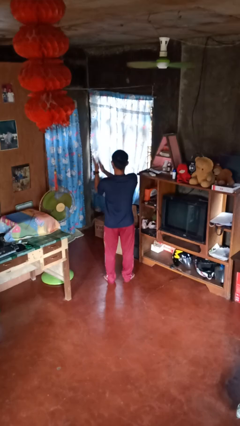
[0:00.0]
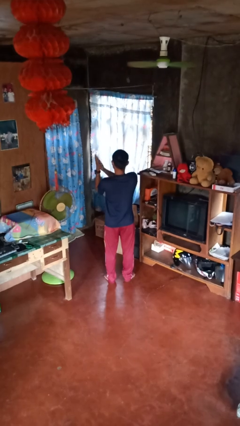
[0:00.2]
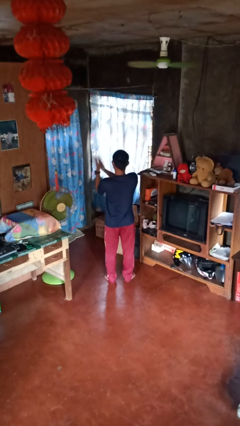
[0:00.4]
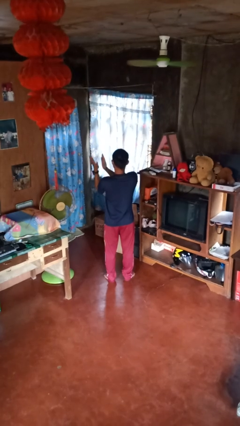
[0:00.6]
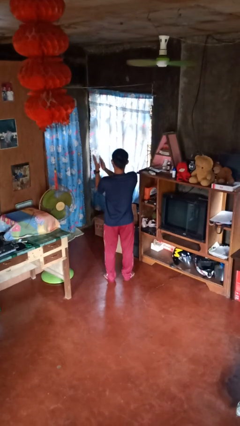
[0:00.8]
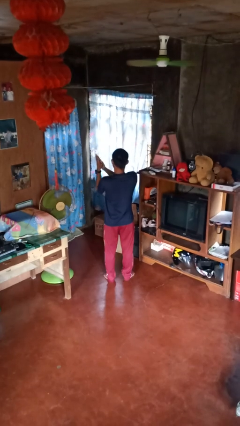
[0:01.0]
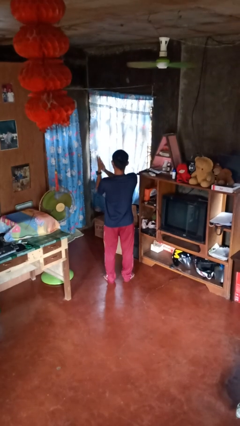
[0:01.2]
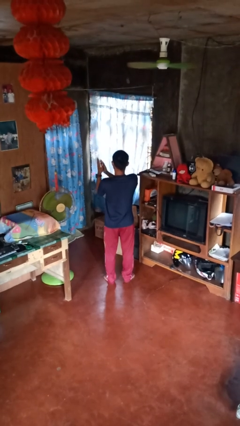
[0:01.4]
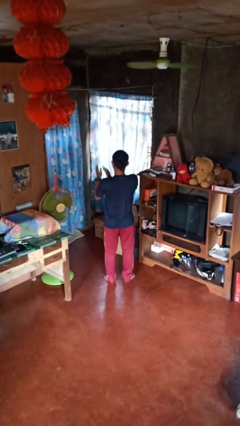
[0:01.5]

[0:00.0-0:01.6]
person claps hands

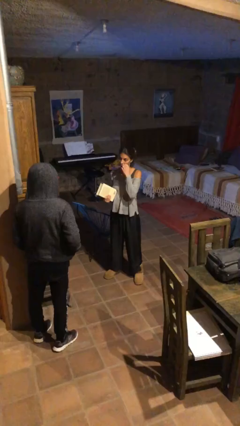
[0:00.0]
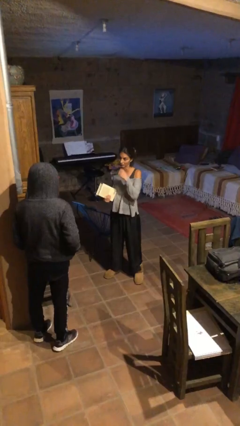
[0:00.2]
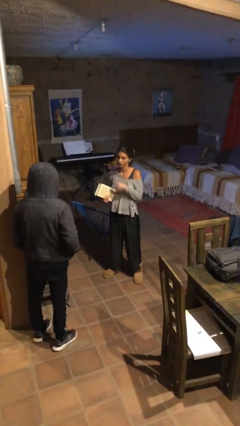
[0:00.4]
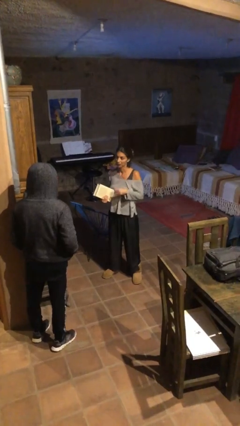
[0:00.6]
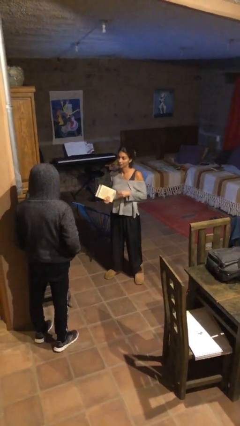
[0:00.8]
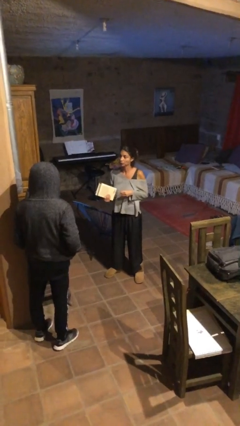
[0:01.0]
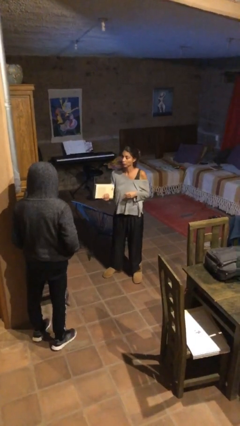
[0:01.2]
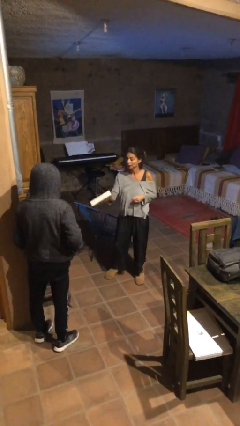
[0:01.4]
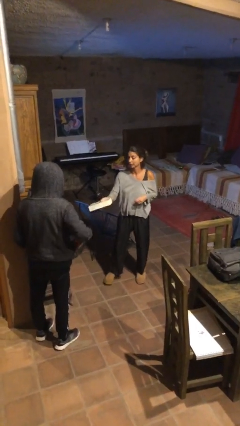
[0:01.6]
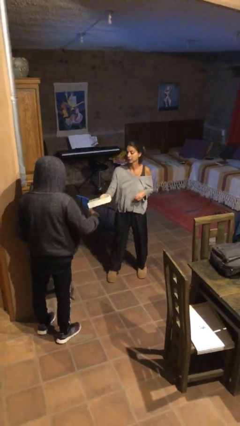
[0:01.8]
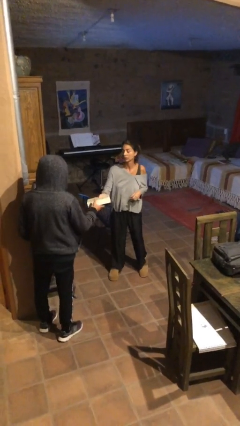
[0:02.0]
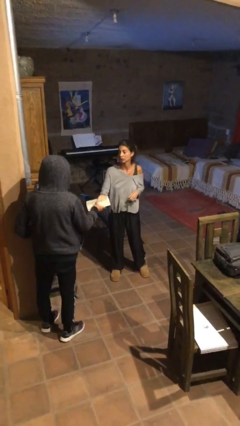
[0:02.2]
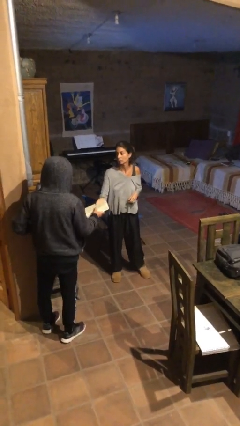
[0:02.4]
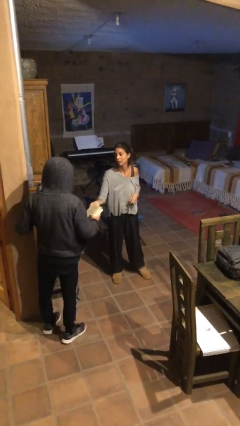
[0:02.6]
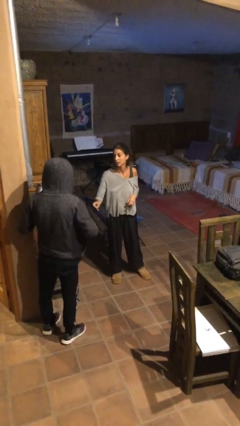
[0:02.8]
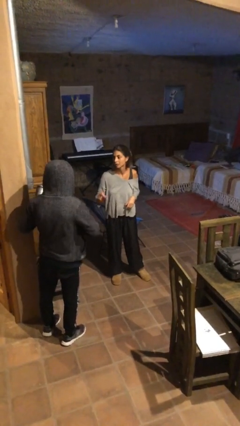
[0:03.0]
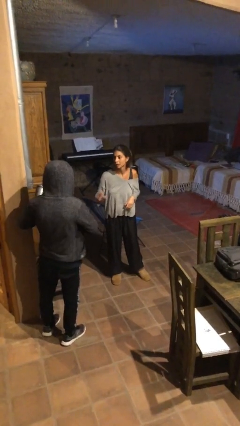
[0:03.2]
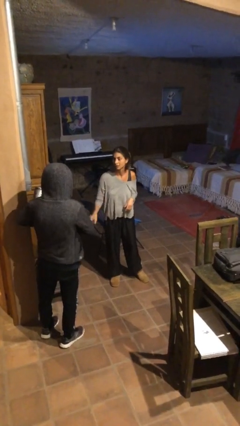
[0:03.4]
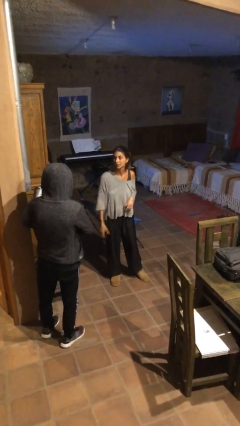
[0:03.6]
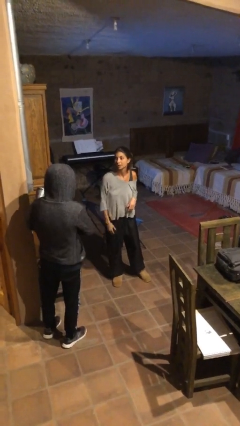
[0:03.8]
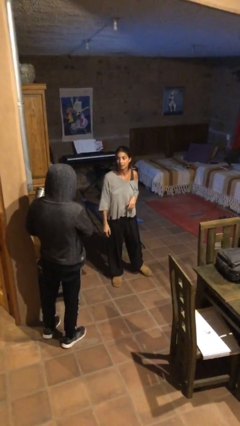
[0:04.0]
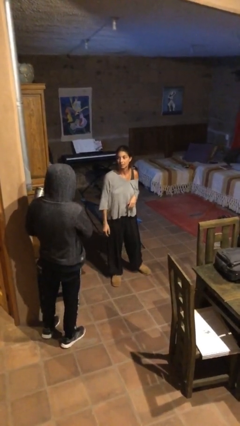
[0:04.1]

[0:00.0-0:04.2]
person transfers object to person

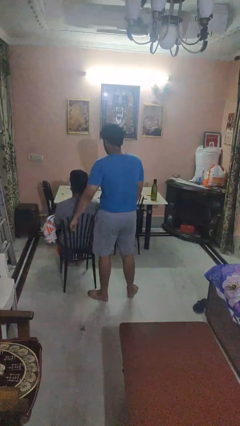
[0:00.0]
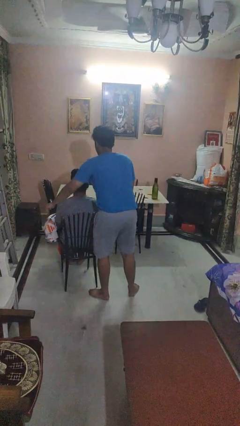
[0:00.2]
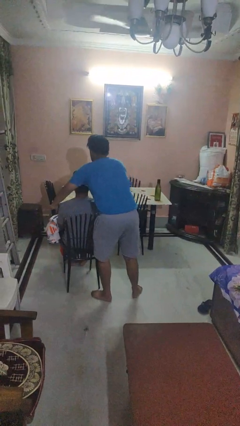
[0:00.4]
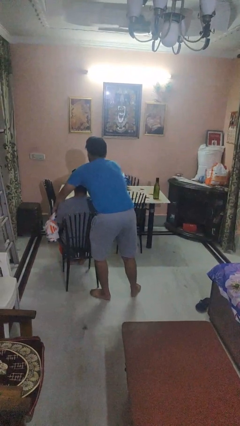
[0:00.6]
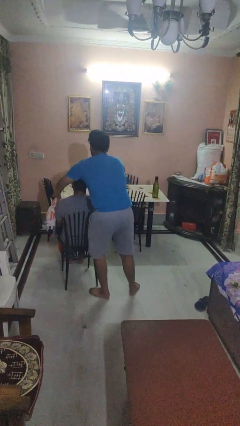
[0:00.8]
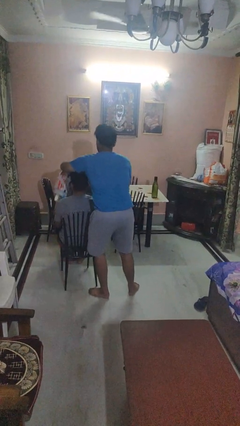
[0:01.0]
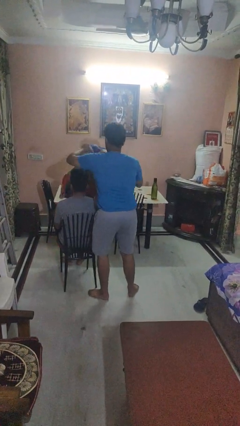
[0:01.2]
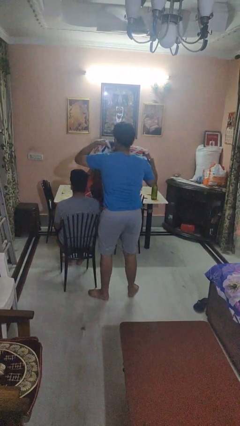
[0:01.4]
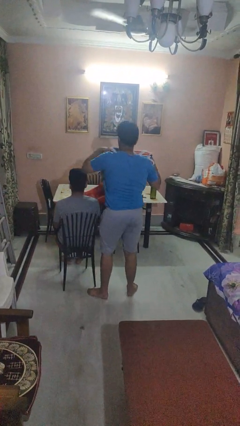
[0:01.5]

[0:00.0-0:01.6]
person uncovers friend with blanket

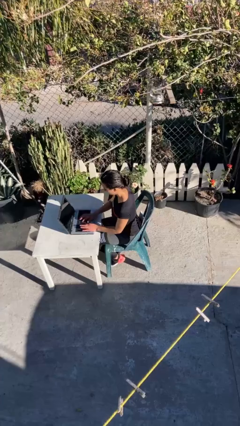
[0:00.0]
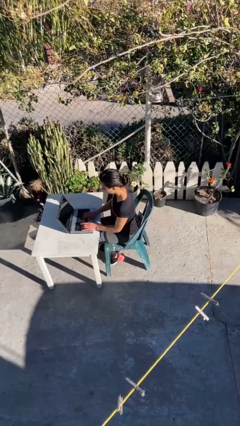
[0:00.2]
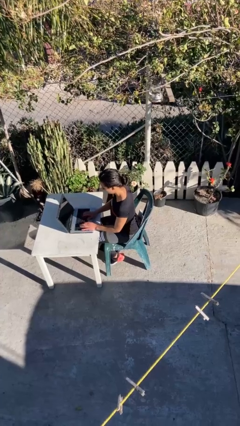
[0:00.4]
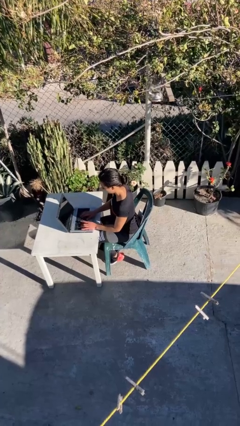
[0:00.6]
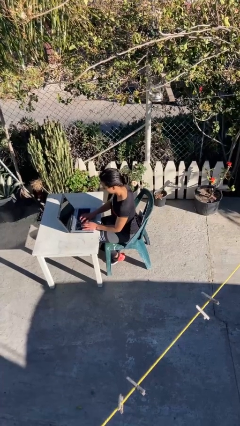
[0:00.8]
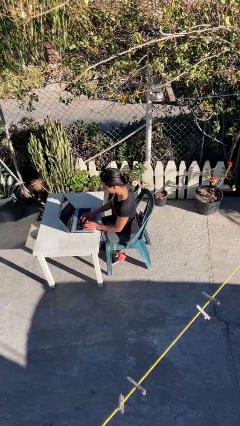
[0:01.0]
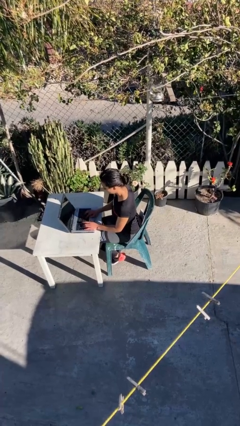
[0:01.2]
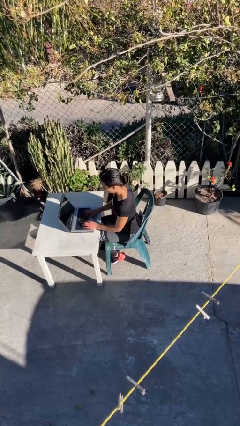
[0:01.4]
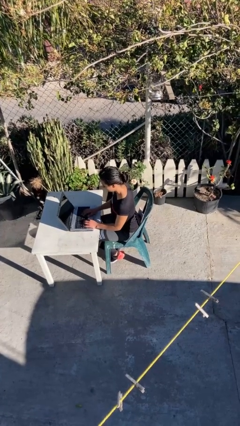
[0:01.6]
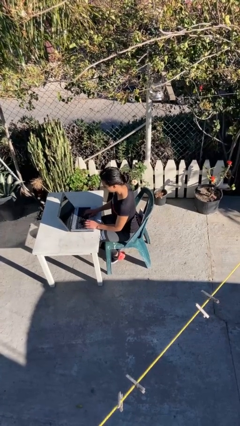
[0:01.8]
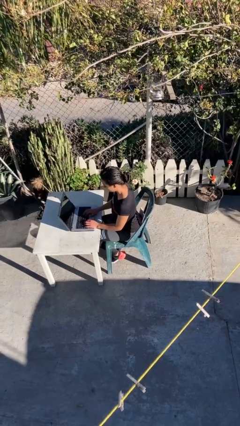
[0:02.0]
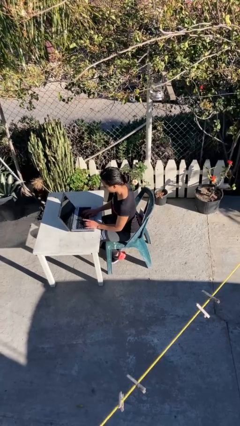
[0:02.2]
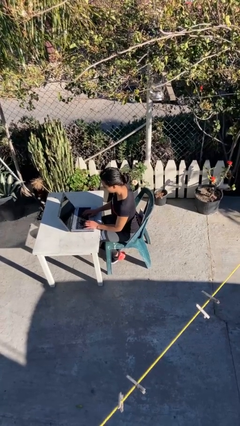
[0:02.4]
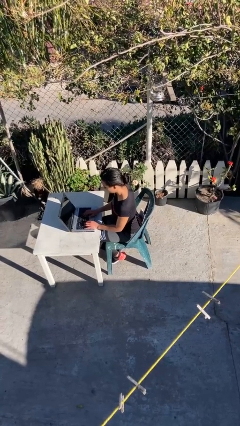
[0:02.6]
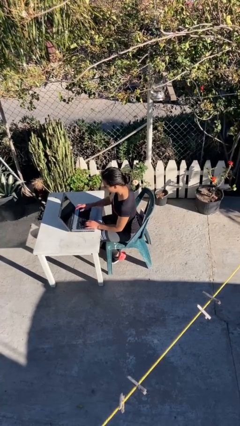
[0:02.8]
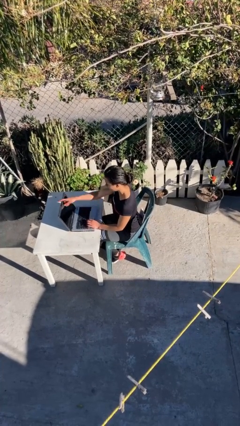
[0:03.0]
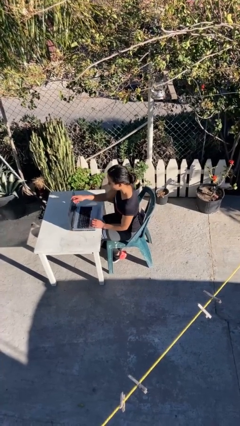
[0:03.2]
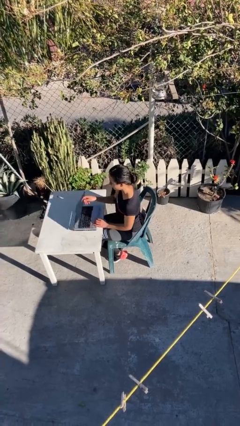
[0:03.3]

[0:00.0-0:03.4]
person interacts with laptop

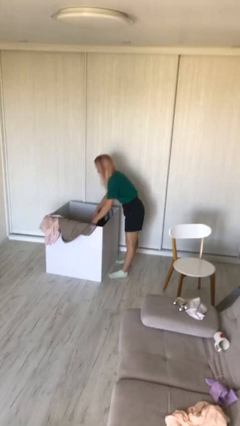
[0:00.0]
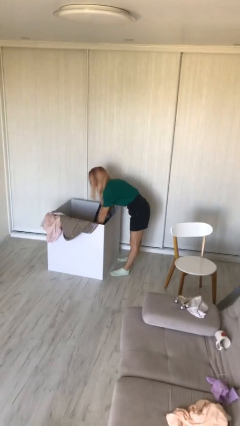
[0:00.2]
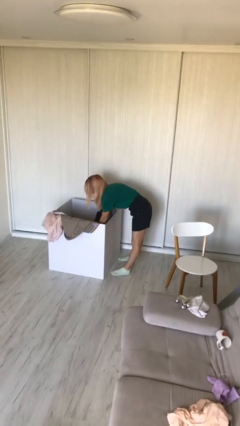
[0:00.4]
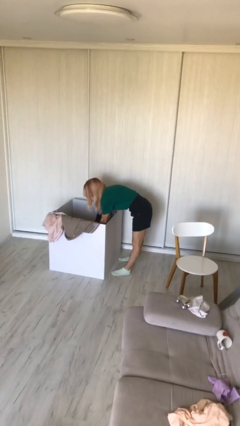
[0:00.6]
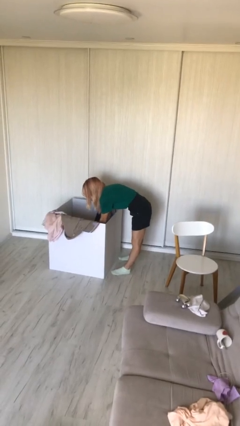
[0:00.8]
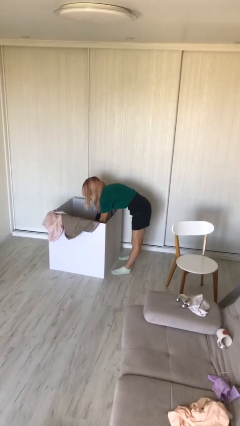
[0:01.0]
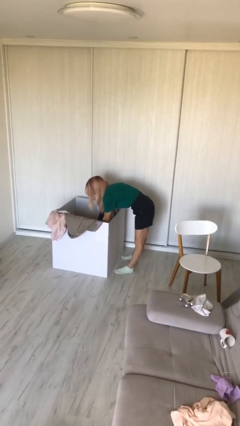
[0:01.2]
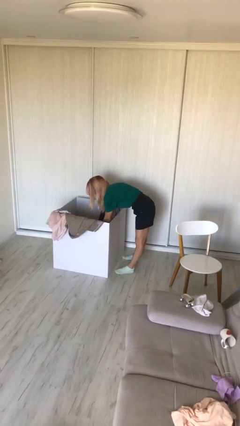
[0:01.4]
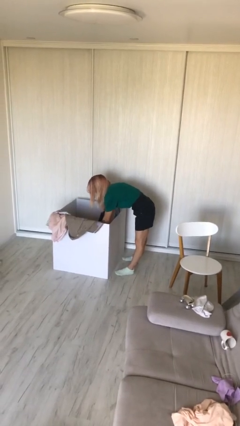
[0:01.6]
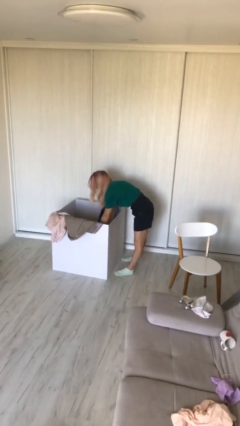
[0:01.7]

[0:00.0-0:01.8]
person searches in box

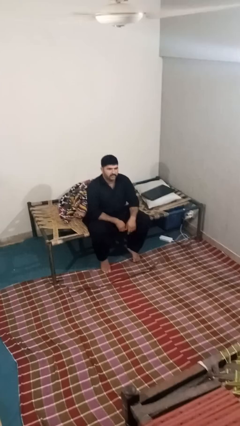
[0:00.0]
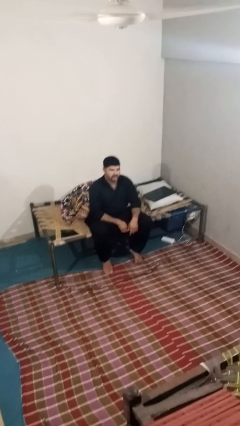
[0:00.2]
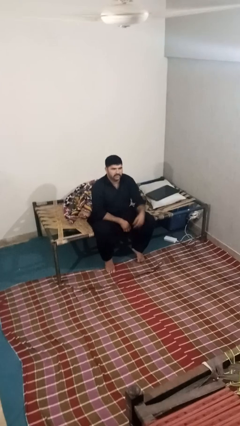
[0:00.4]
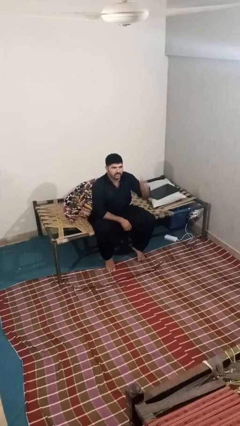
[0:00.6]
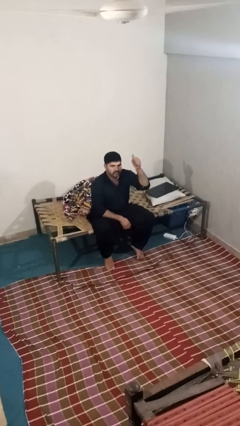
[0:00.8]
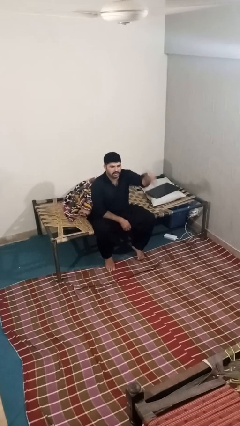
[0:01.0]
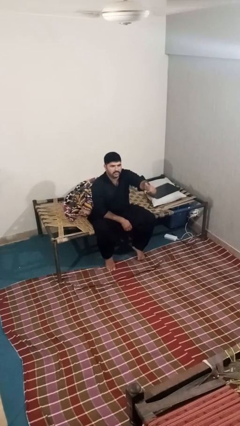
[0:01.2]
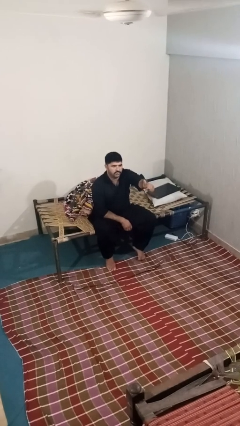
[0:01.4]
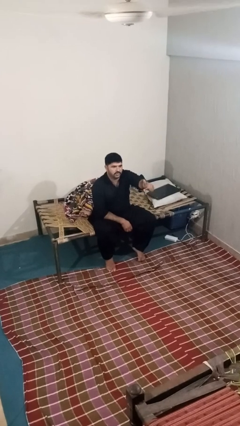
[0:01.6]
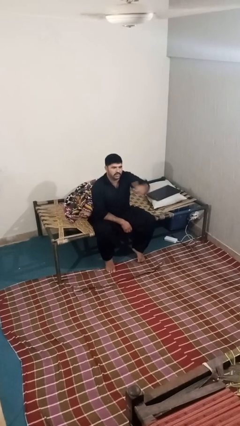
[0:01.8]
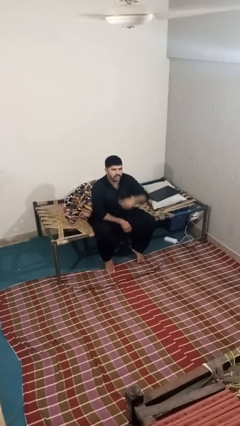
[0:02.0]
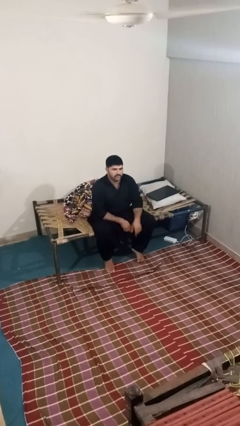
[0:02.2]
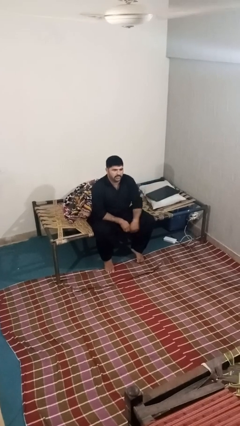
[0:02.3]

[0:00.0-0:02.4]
person gestures thumbs up

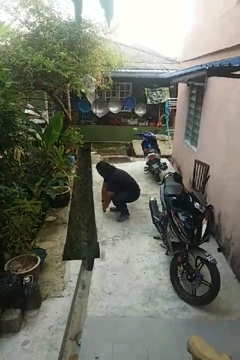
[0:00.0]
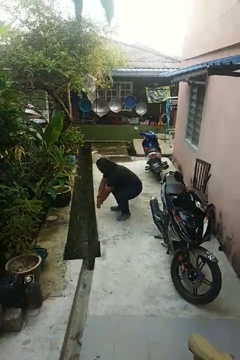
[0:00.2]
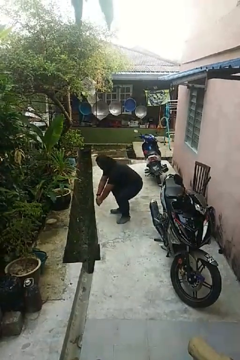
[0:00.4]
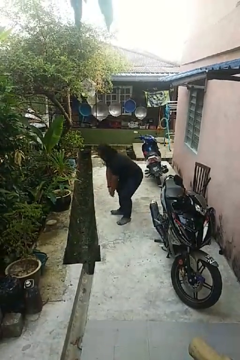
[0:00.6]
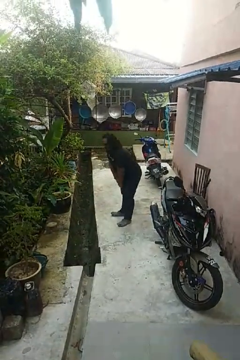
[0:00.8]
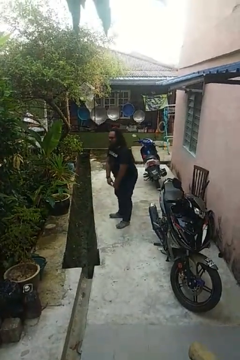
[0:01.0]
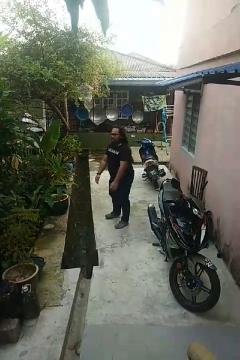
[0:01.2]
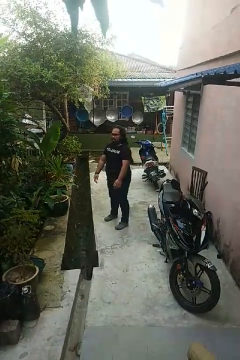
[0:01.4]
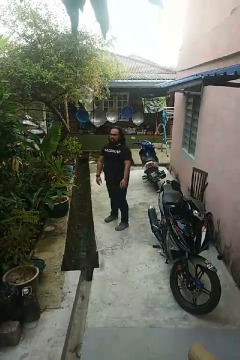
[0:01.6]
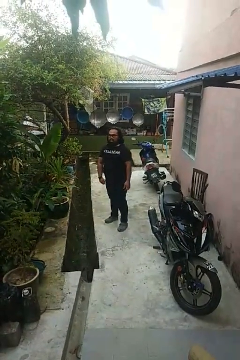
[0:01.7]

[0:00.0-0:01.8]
person stands up

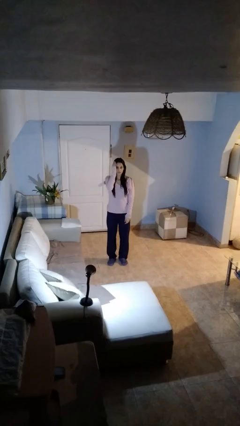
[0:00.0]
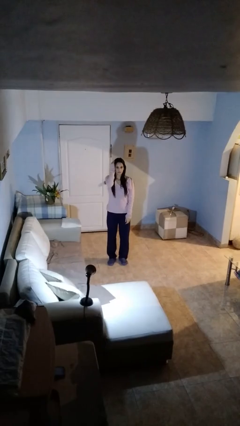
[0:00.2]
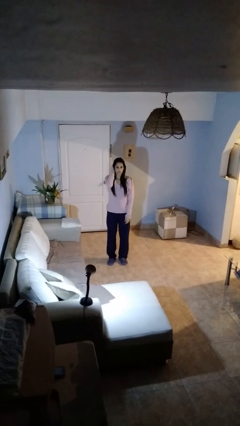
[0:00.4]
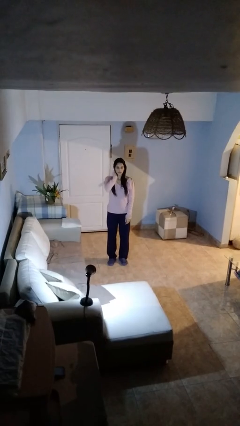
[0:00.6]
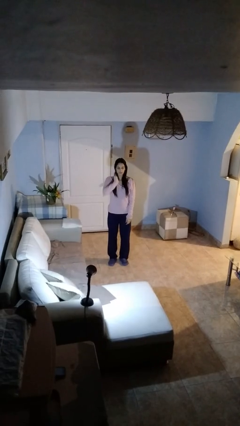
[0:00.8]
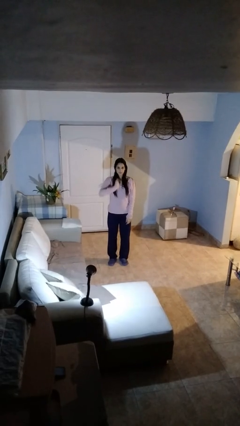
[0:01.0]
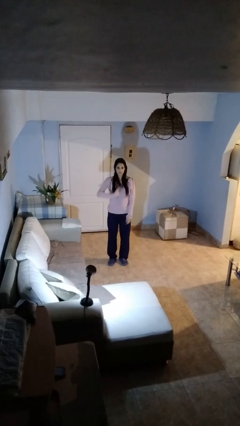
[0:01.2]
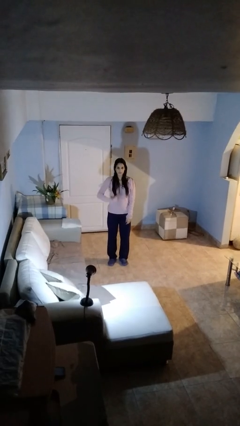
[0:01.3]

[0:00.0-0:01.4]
person strokes hair
